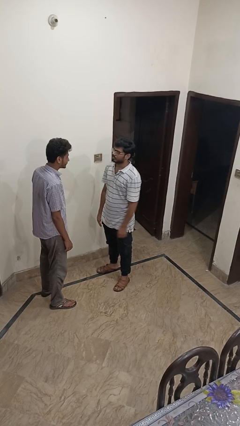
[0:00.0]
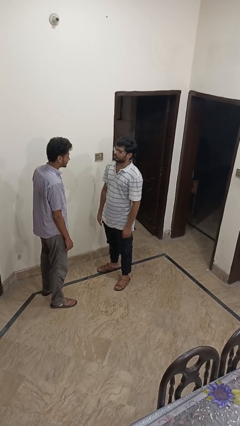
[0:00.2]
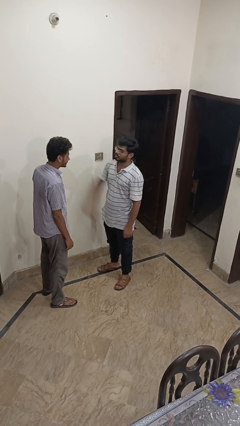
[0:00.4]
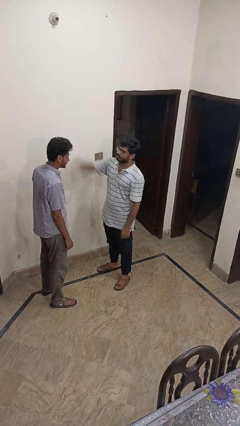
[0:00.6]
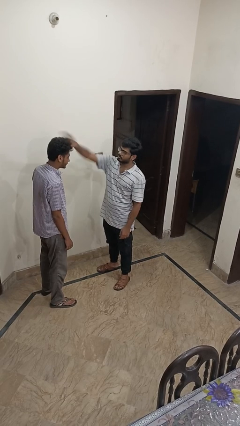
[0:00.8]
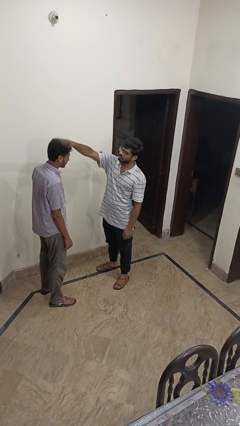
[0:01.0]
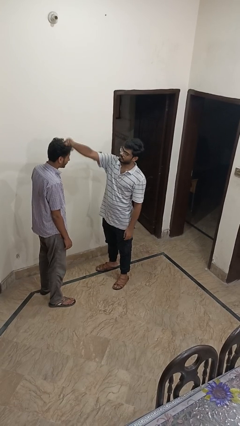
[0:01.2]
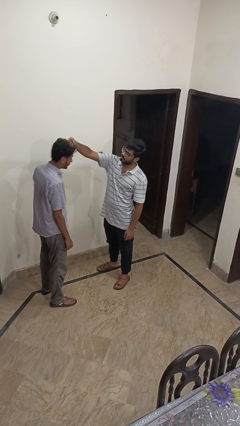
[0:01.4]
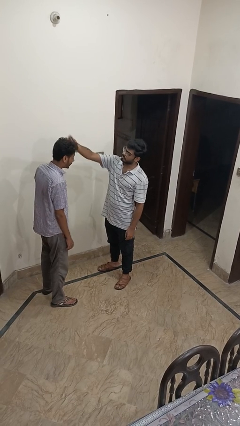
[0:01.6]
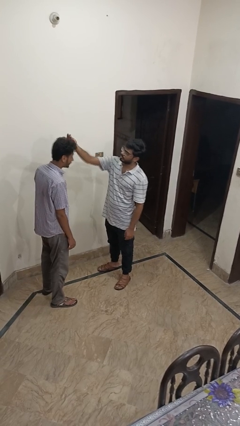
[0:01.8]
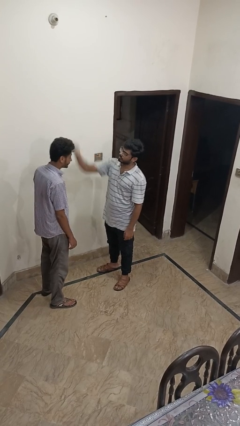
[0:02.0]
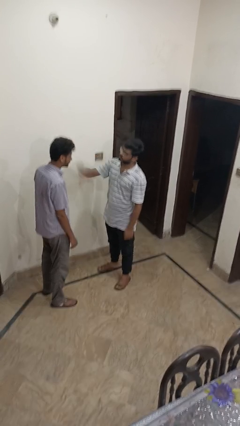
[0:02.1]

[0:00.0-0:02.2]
person grabs person by hair

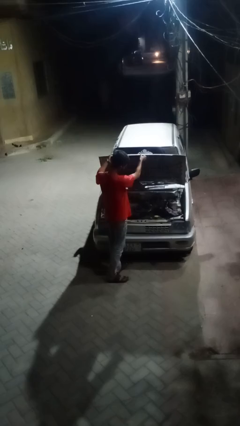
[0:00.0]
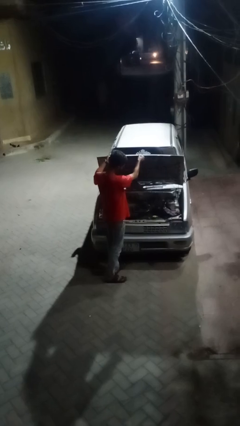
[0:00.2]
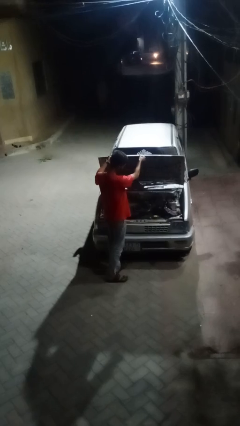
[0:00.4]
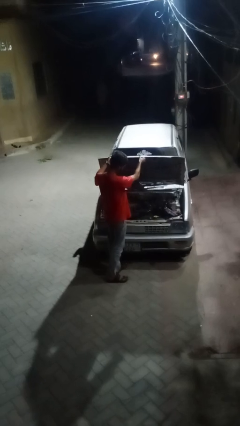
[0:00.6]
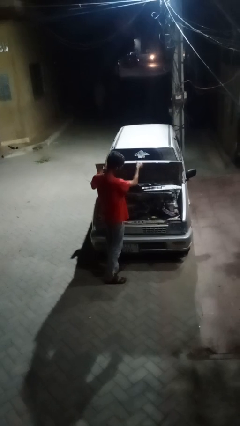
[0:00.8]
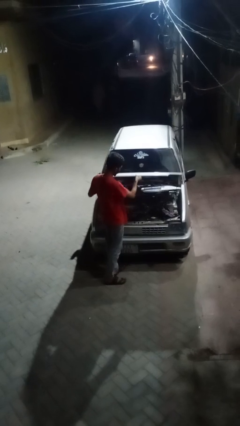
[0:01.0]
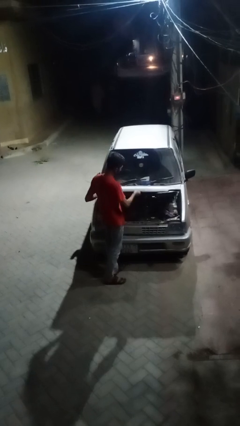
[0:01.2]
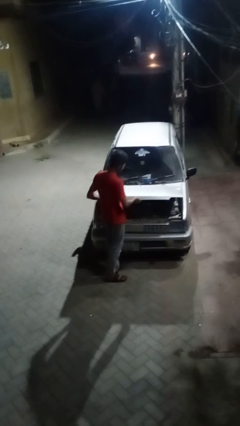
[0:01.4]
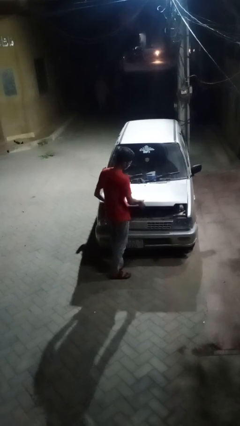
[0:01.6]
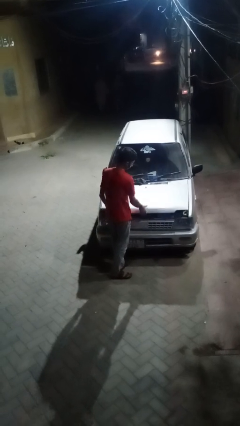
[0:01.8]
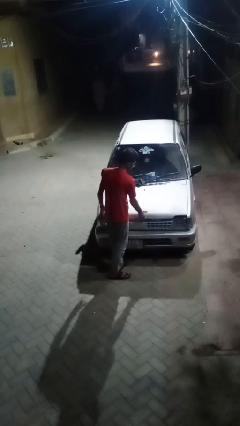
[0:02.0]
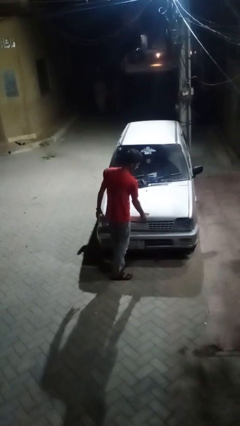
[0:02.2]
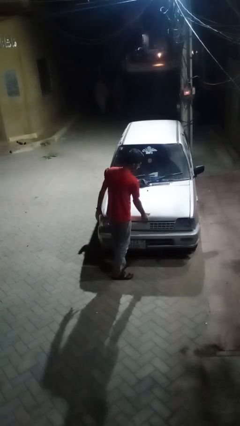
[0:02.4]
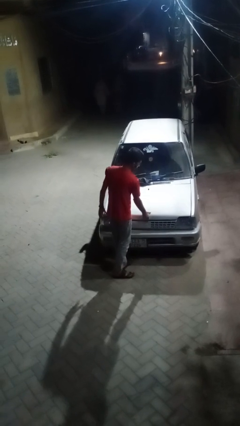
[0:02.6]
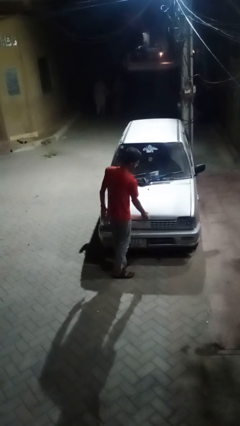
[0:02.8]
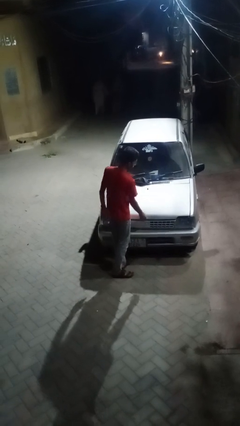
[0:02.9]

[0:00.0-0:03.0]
person closes car hood

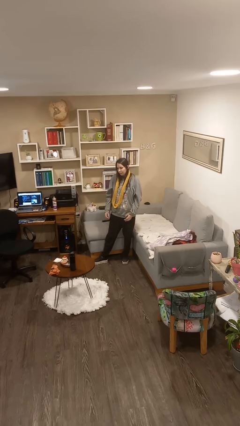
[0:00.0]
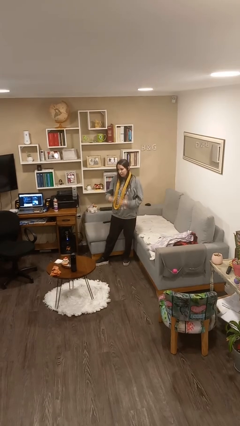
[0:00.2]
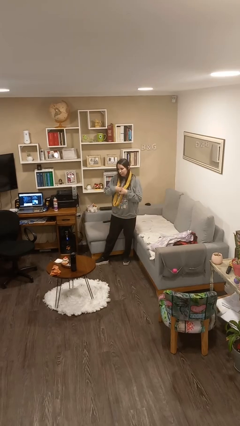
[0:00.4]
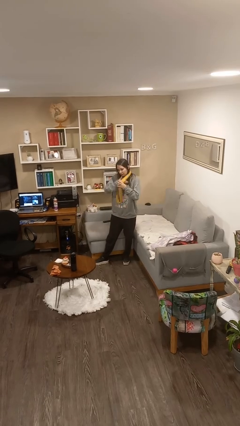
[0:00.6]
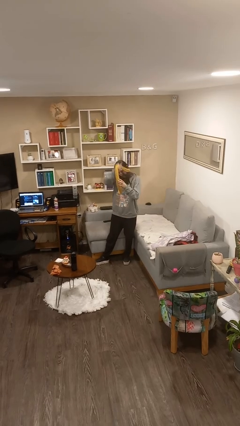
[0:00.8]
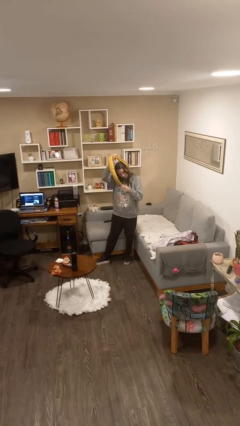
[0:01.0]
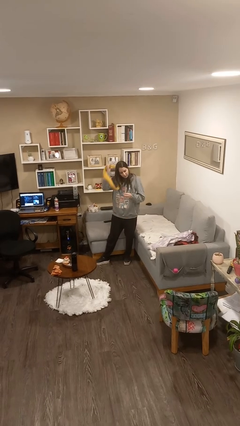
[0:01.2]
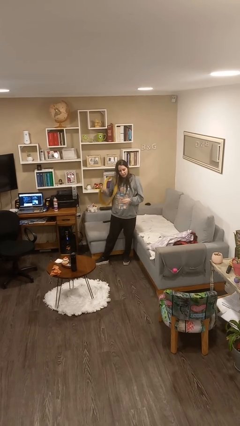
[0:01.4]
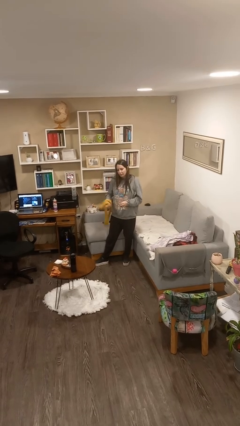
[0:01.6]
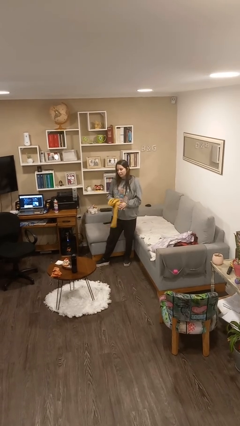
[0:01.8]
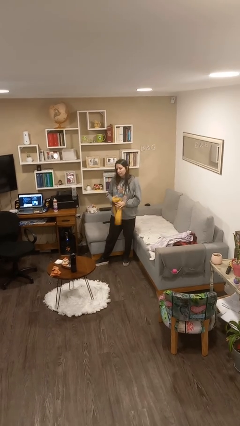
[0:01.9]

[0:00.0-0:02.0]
person takes off scarf

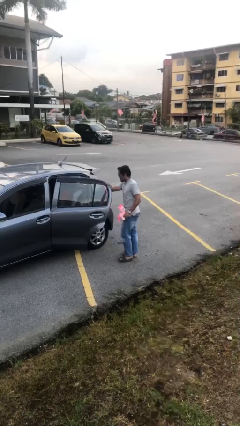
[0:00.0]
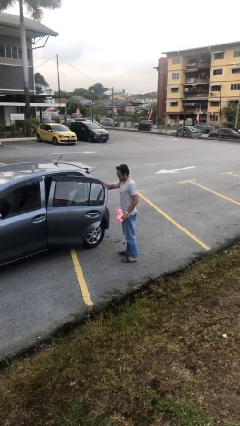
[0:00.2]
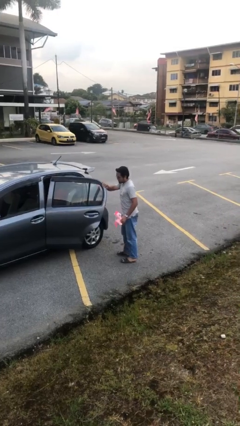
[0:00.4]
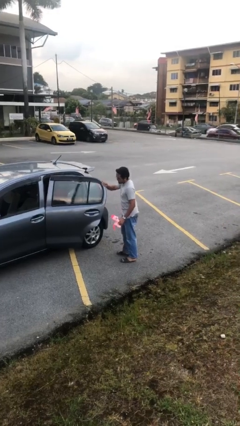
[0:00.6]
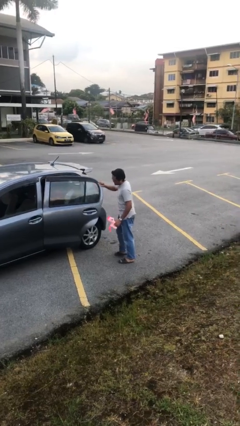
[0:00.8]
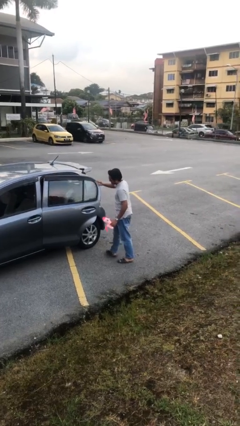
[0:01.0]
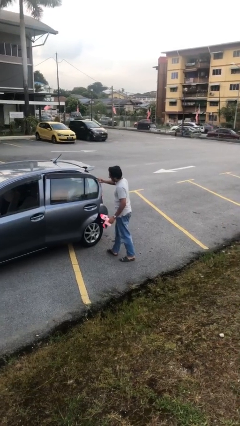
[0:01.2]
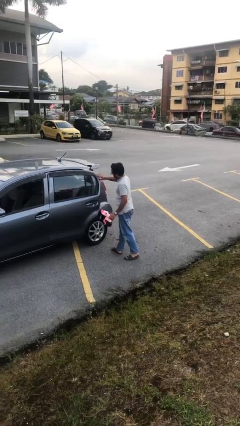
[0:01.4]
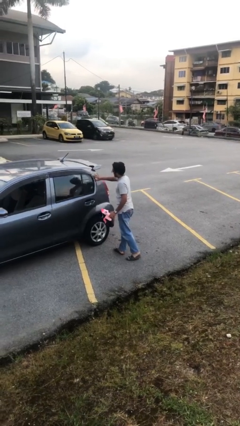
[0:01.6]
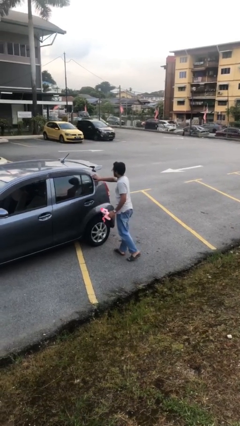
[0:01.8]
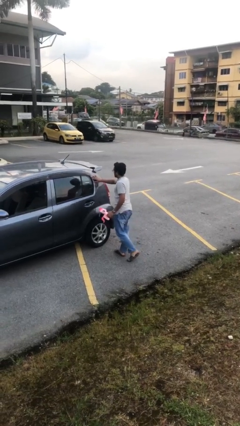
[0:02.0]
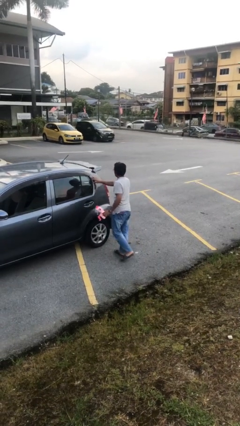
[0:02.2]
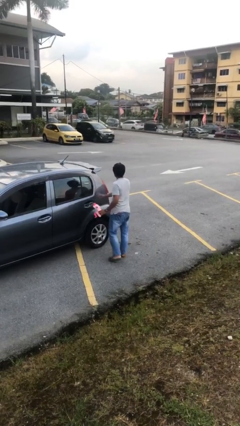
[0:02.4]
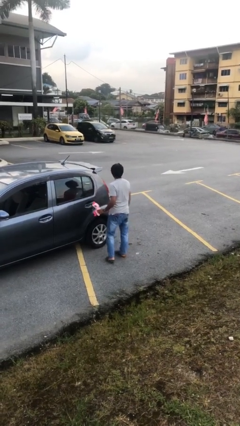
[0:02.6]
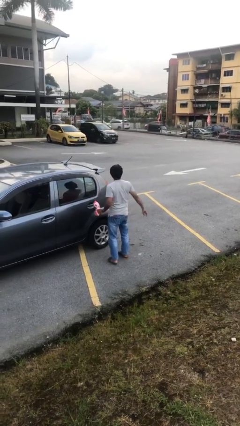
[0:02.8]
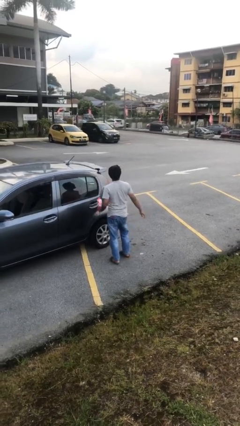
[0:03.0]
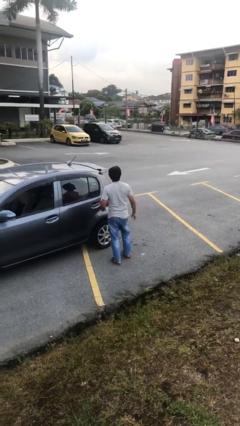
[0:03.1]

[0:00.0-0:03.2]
person closes car door

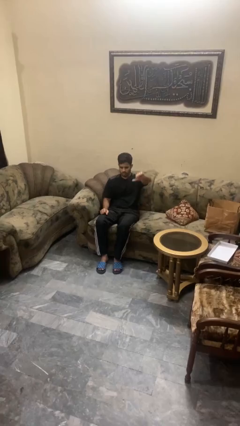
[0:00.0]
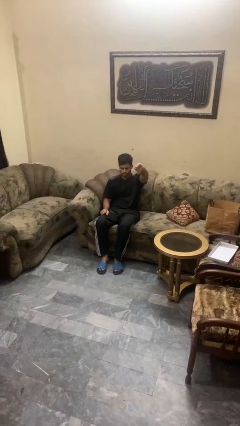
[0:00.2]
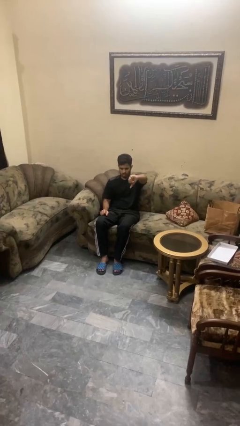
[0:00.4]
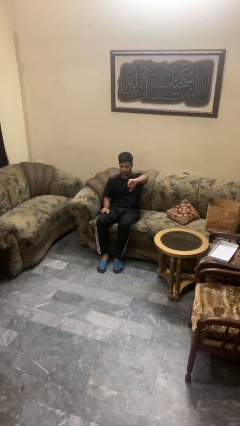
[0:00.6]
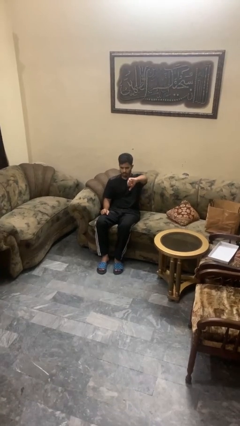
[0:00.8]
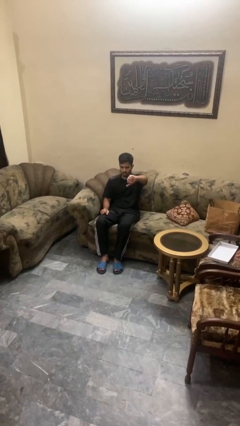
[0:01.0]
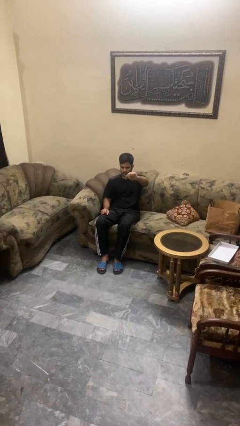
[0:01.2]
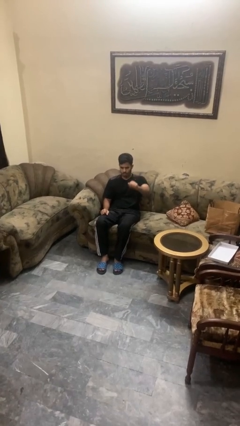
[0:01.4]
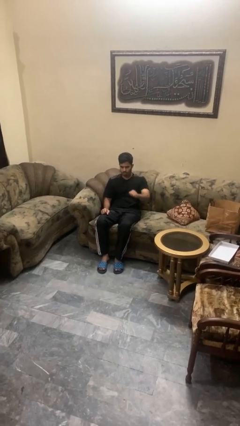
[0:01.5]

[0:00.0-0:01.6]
person gestures thumbs down

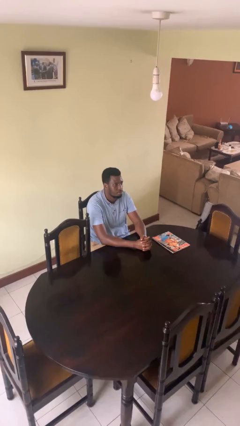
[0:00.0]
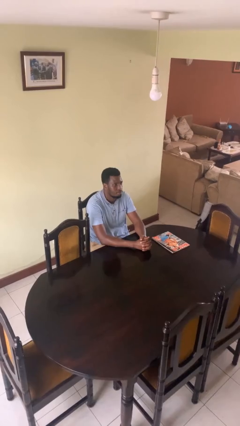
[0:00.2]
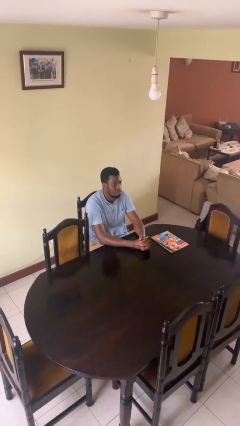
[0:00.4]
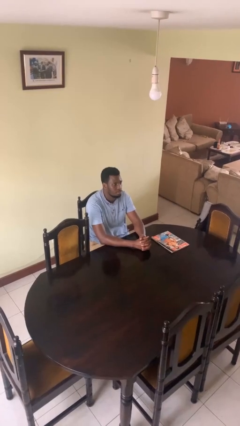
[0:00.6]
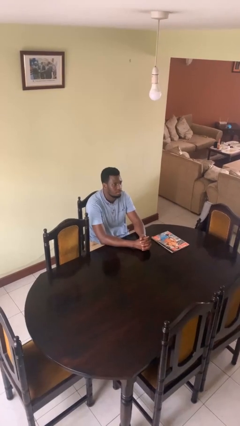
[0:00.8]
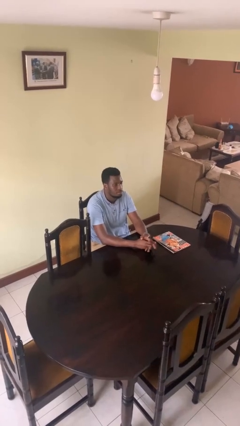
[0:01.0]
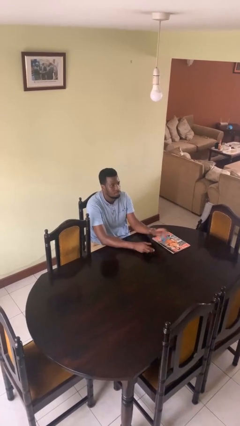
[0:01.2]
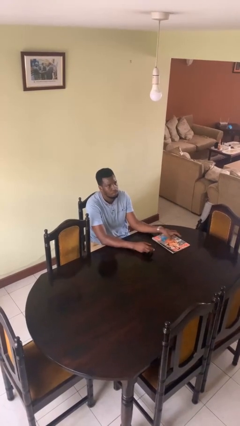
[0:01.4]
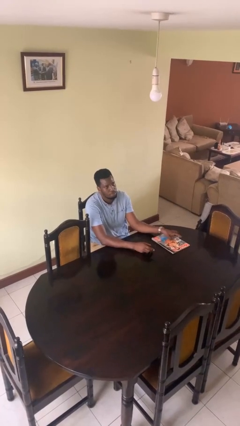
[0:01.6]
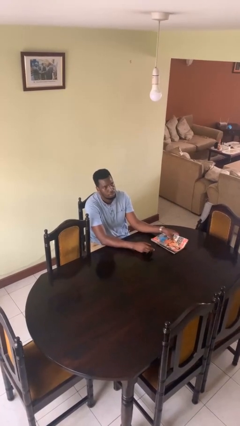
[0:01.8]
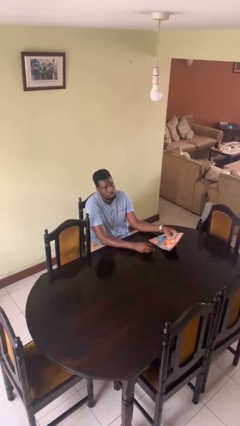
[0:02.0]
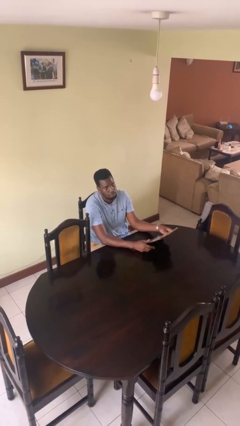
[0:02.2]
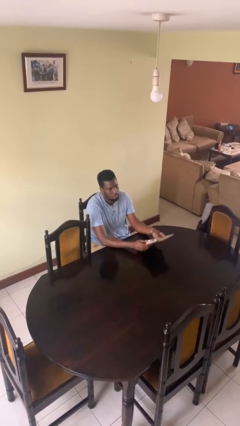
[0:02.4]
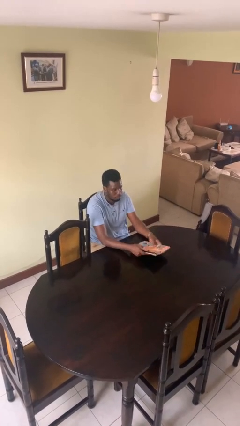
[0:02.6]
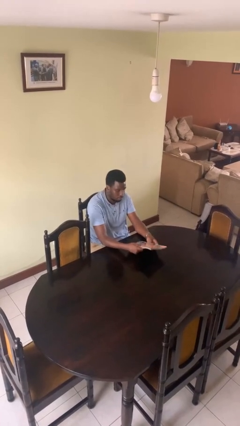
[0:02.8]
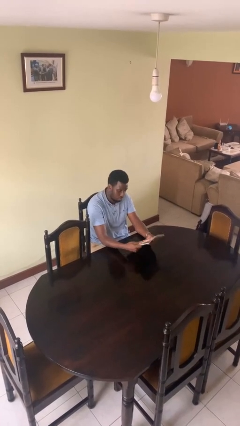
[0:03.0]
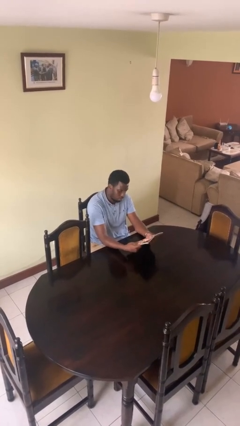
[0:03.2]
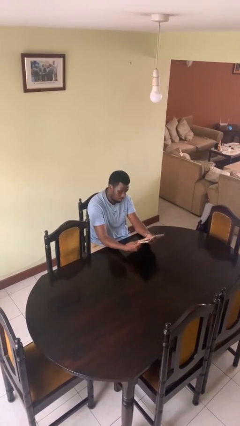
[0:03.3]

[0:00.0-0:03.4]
person picks up object from table

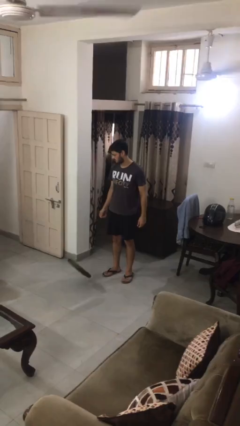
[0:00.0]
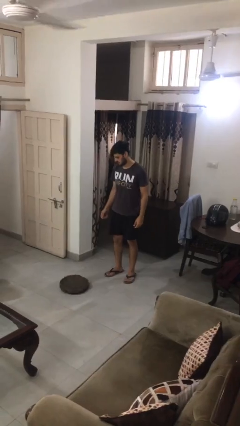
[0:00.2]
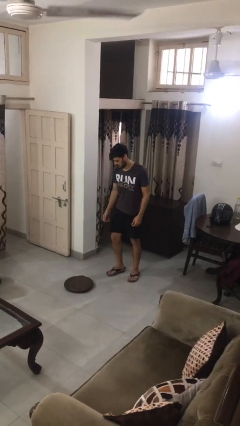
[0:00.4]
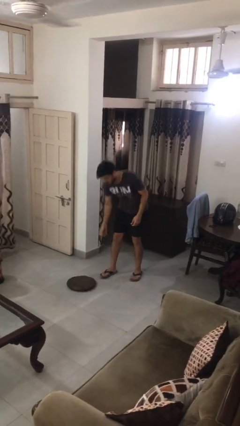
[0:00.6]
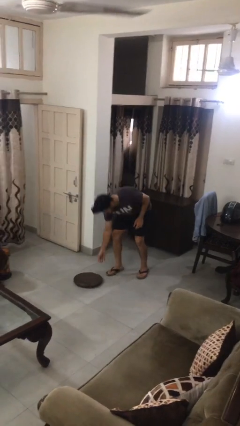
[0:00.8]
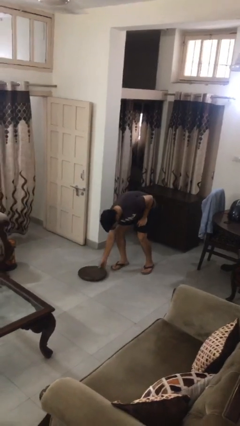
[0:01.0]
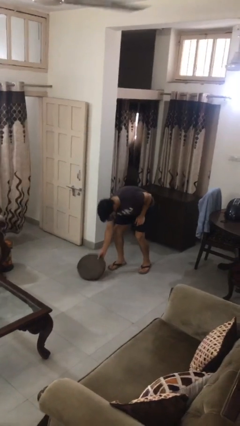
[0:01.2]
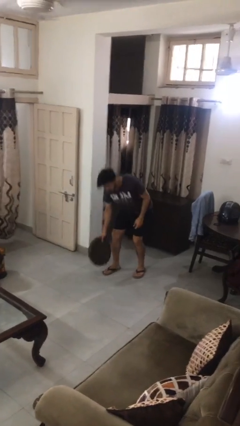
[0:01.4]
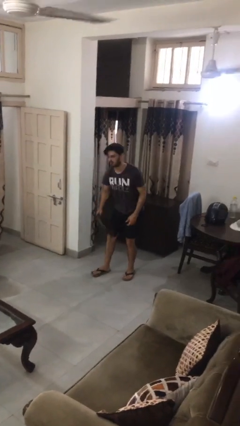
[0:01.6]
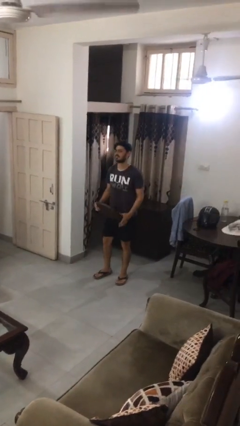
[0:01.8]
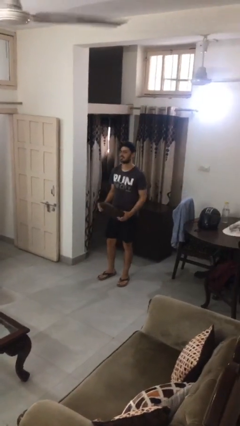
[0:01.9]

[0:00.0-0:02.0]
person picks up object from floor
